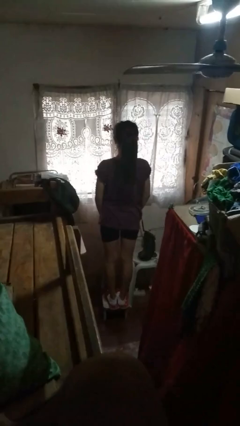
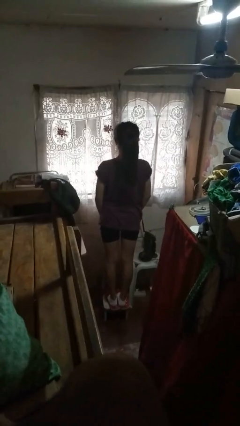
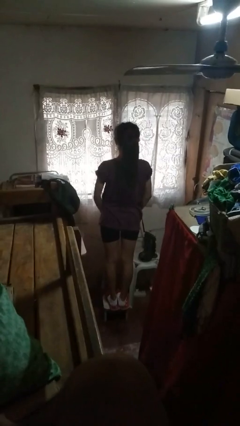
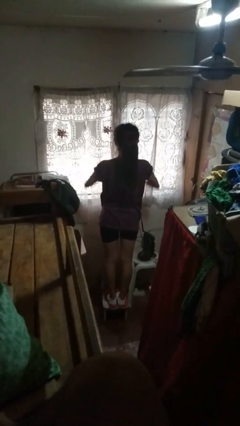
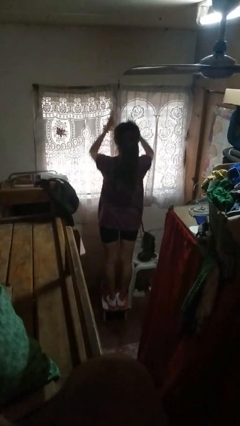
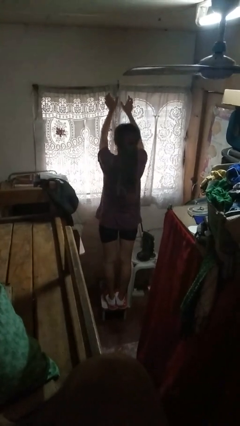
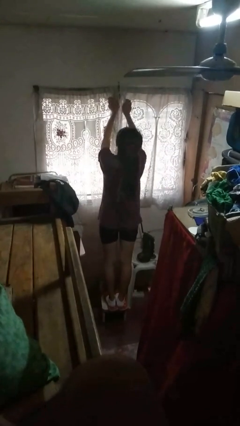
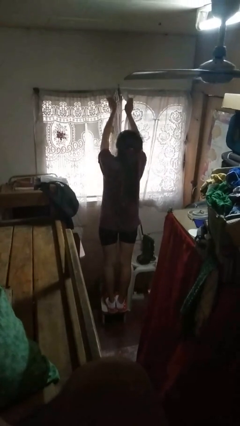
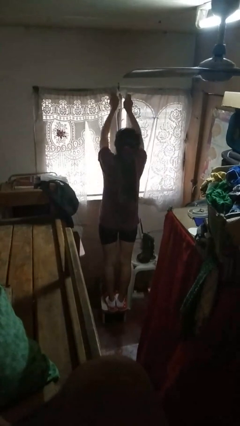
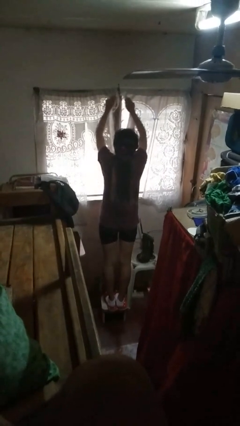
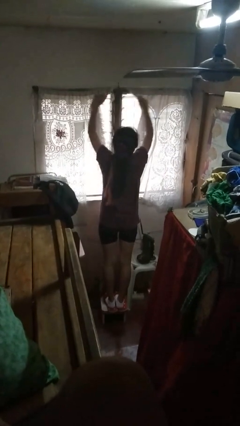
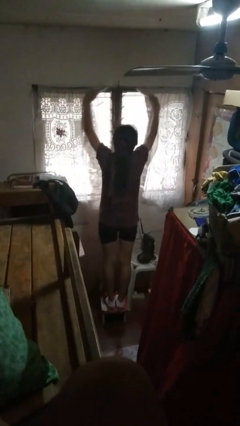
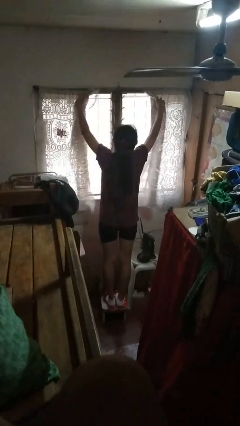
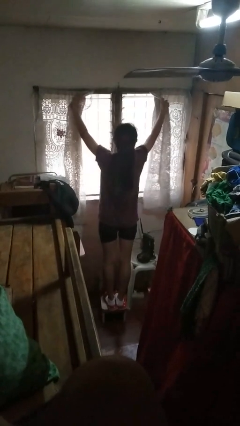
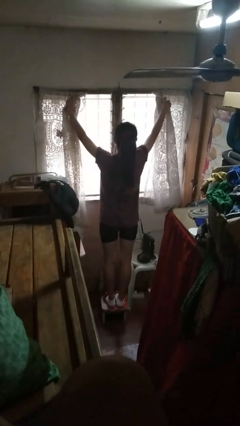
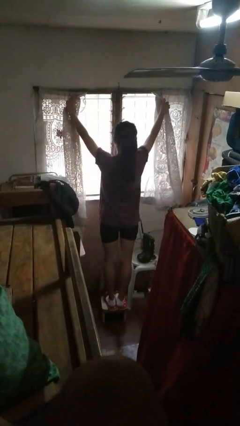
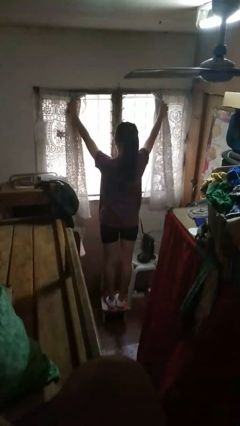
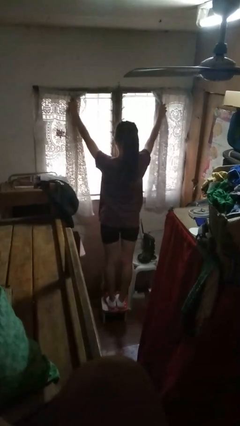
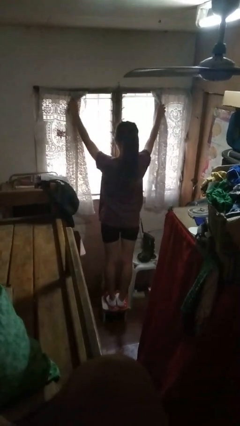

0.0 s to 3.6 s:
person opens curtains

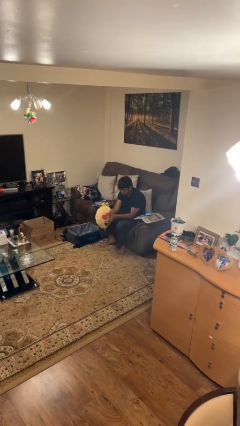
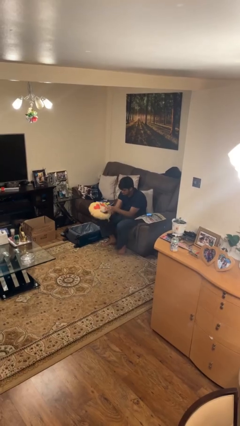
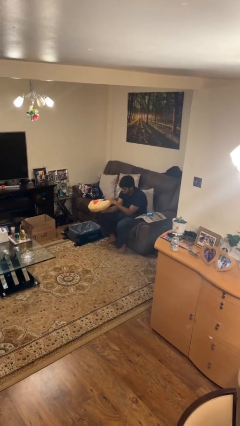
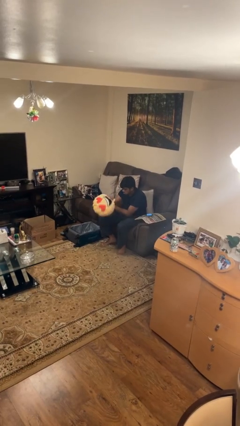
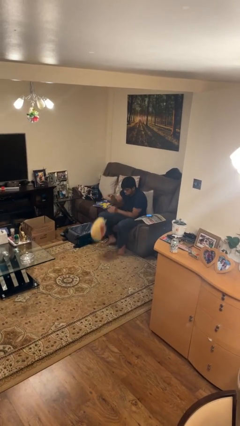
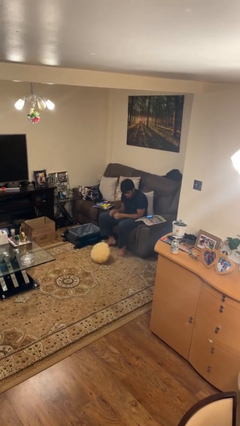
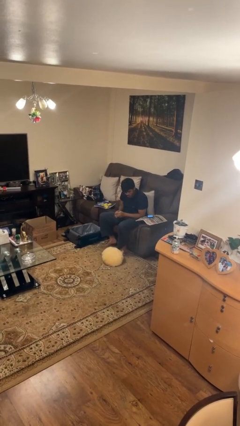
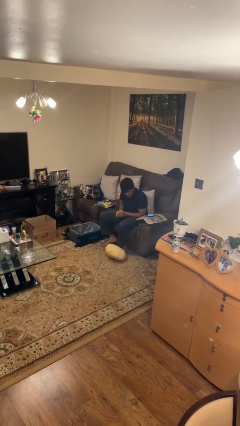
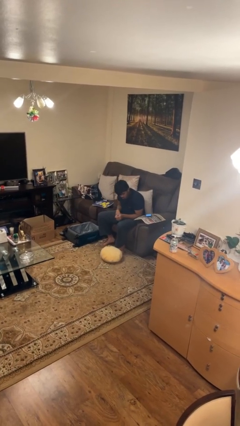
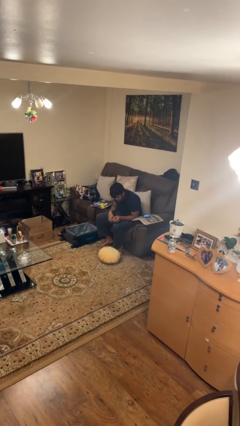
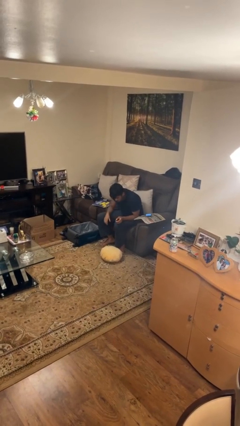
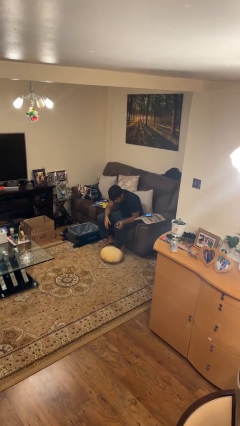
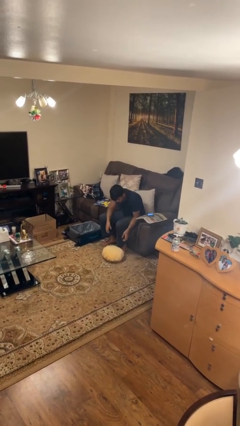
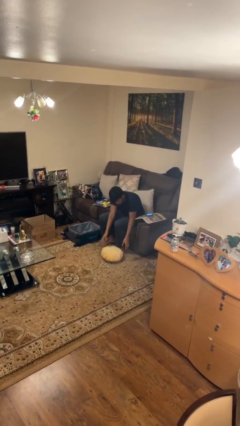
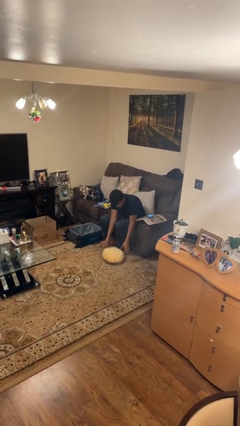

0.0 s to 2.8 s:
person drops object

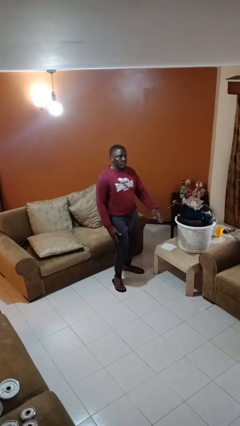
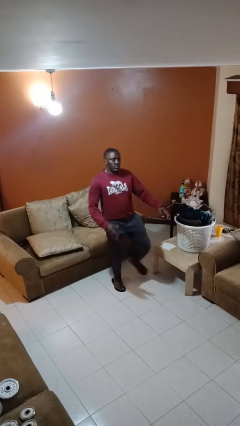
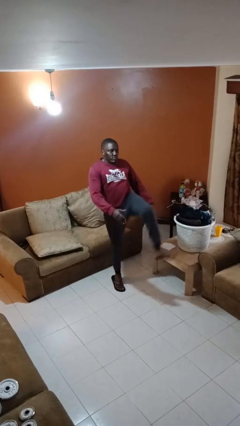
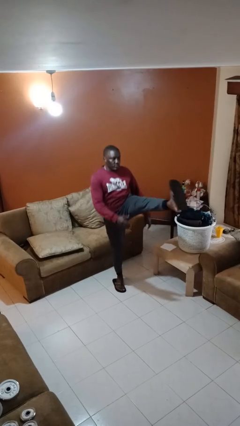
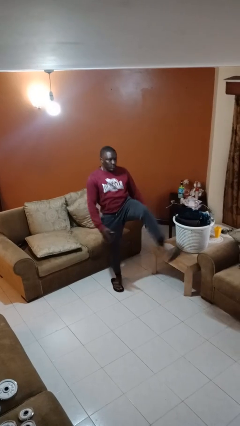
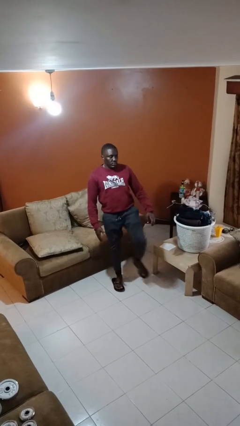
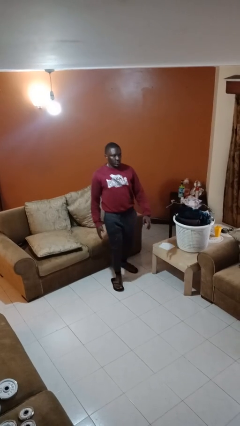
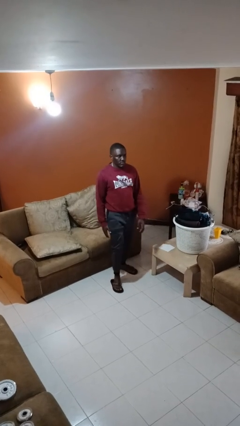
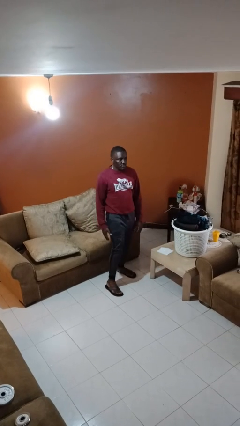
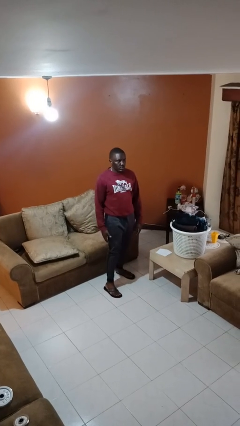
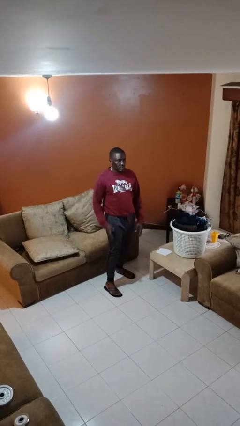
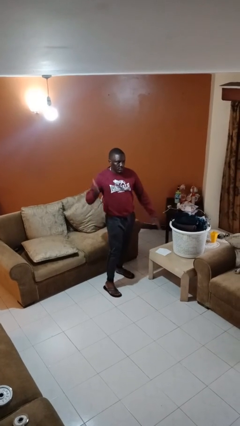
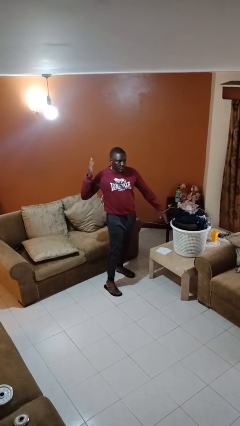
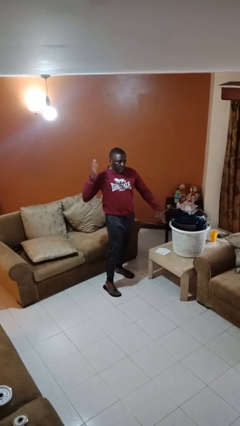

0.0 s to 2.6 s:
person karate kicks

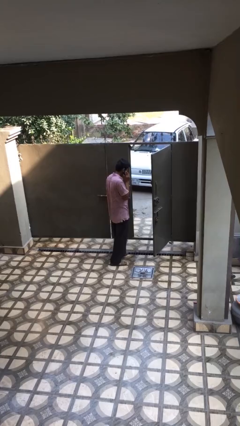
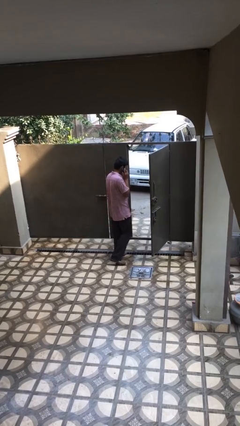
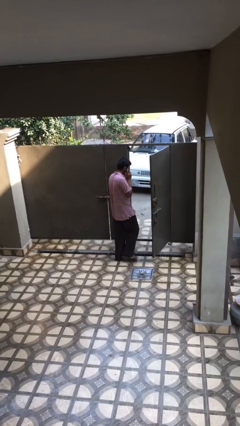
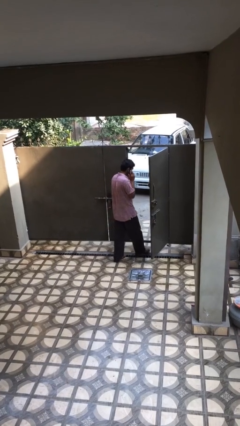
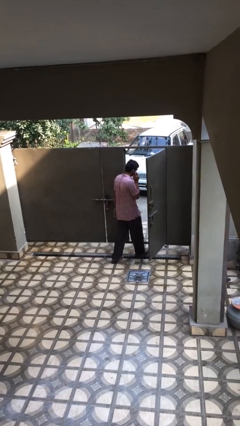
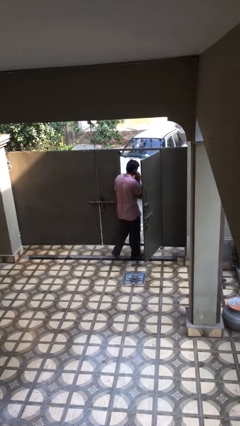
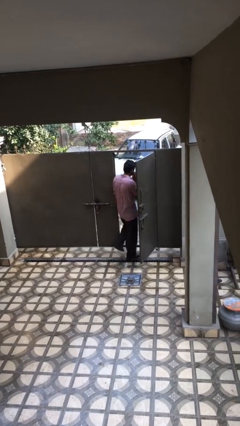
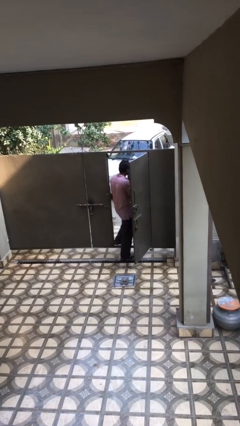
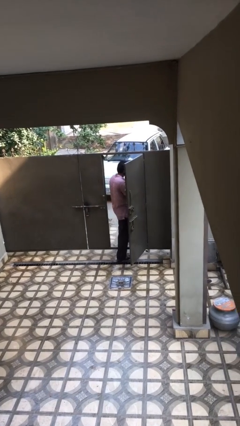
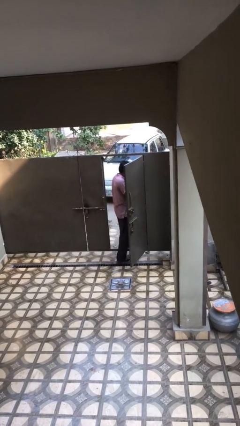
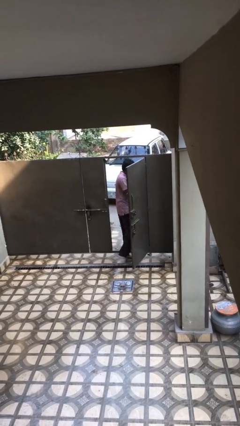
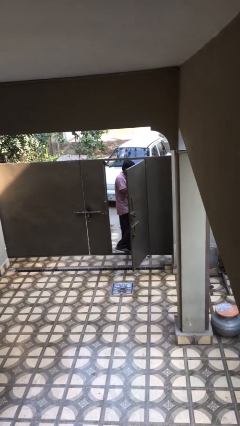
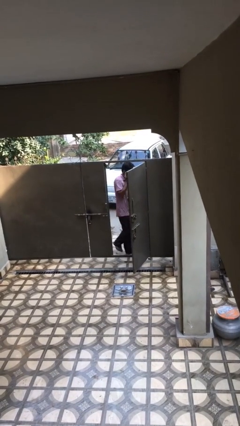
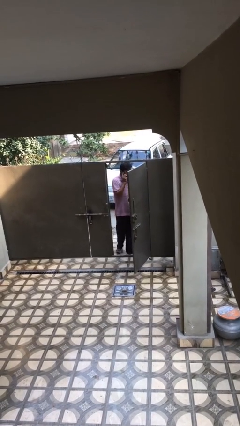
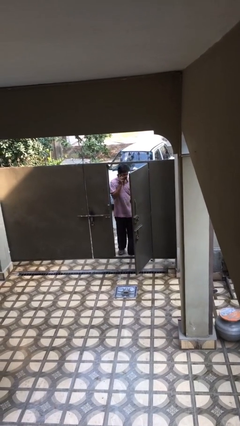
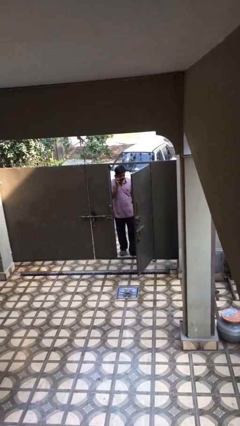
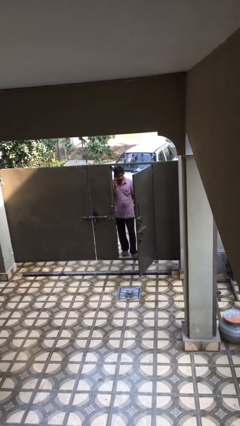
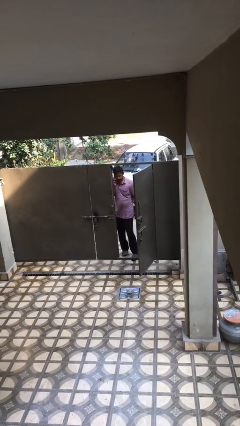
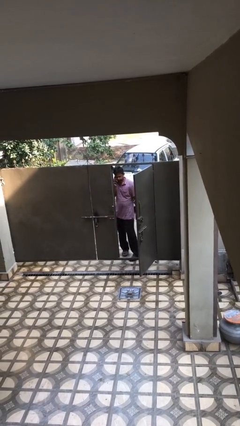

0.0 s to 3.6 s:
person exits scene through structure

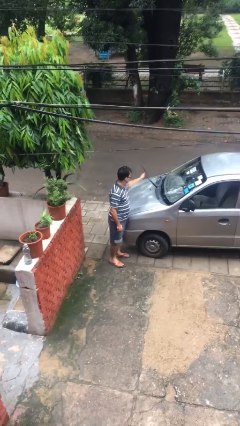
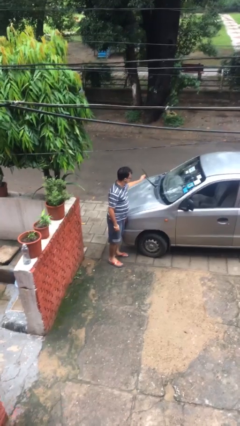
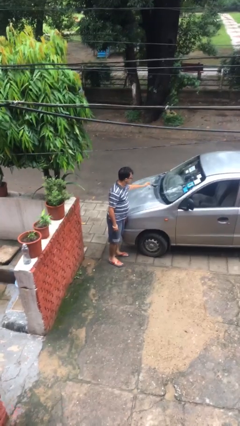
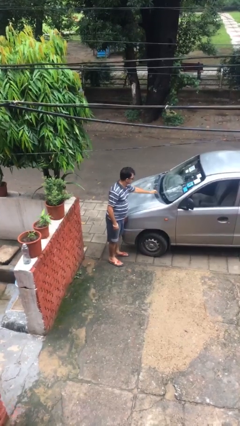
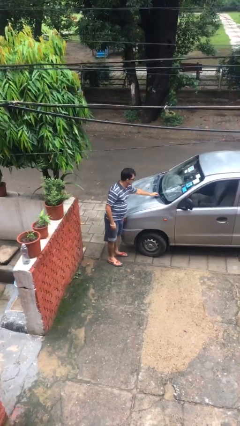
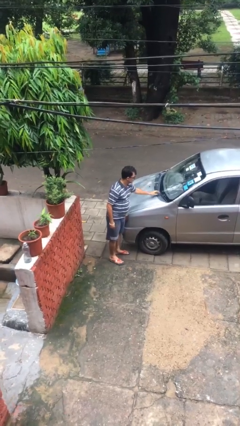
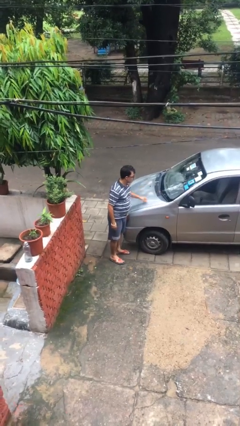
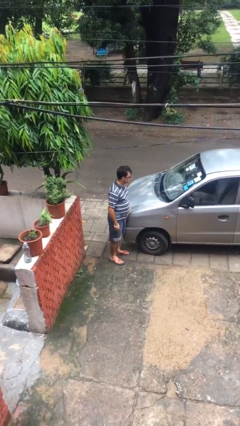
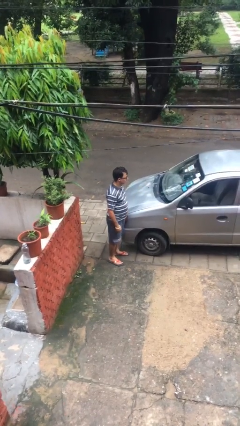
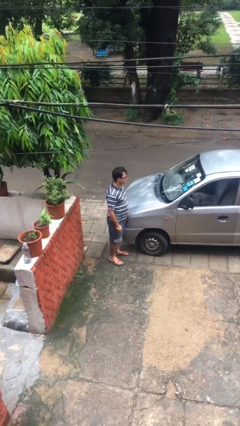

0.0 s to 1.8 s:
person flips down car wipers

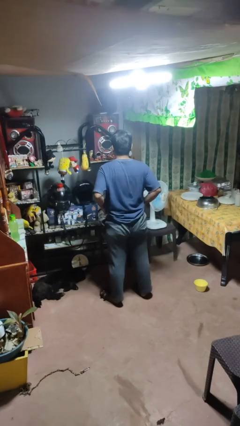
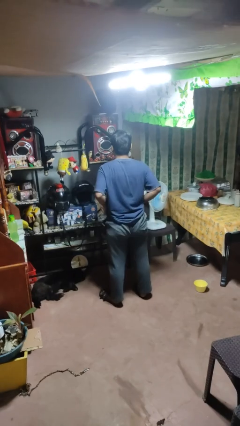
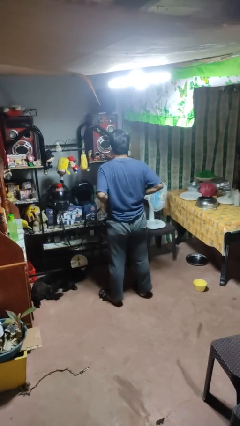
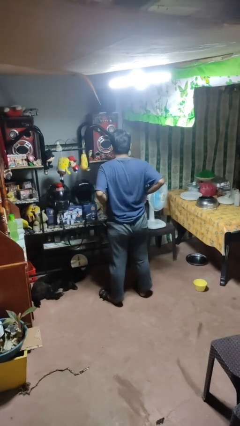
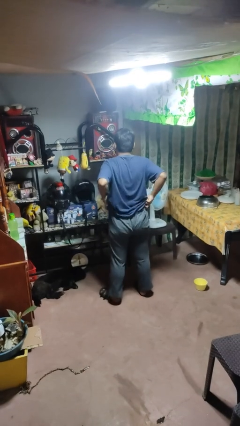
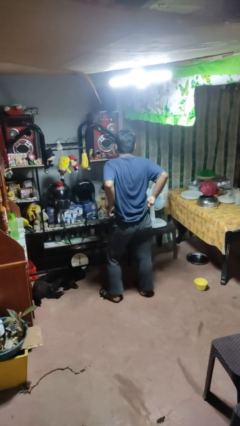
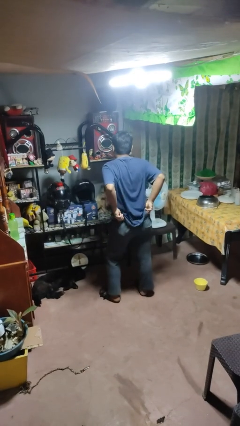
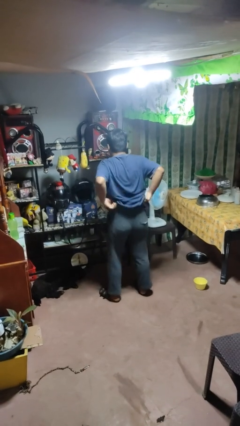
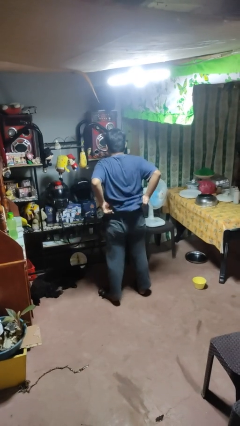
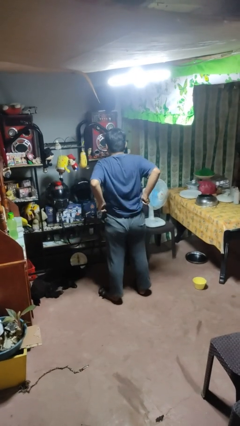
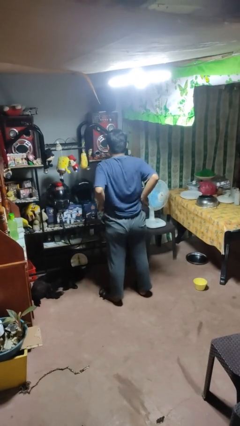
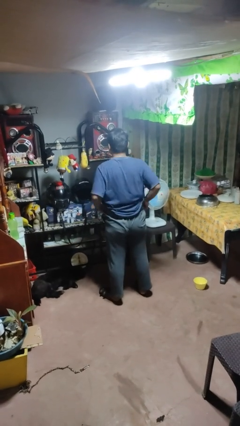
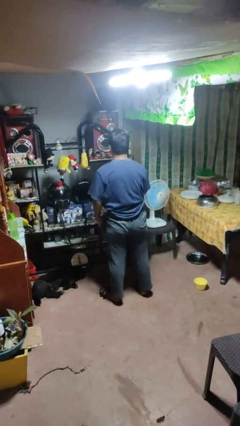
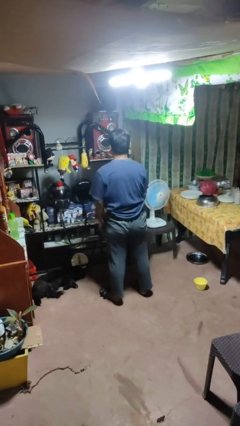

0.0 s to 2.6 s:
person hikes up pants

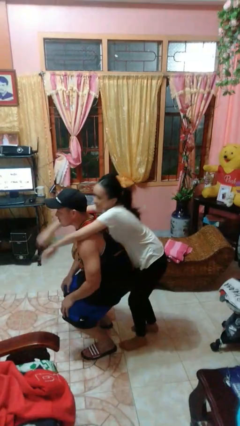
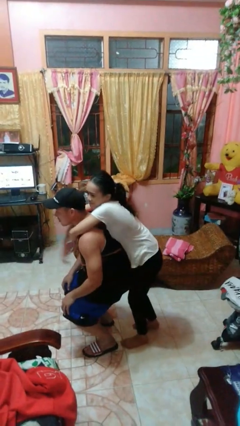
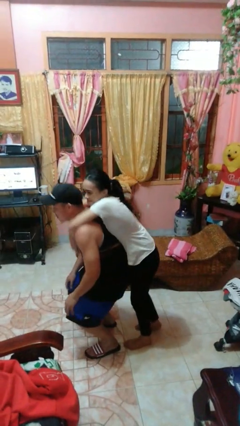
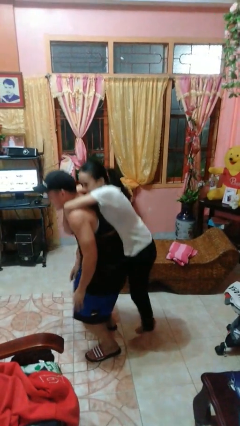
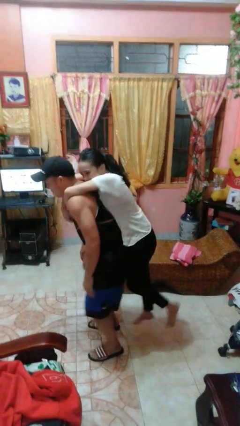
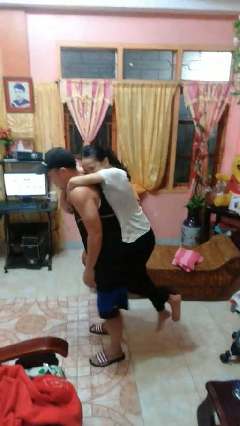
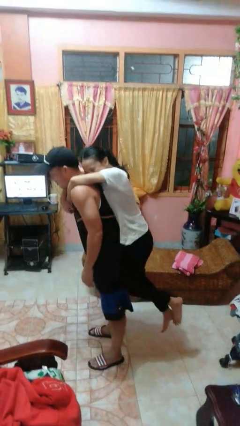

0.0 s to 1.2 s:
person picks up person
